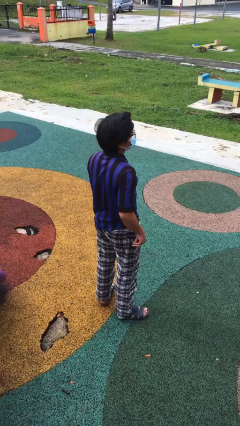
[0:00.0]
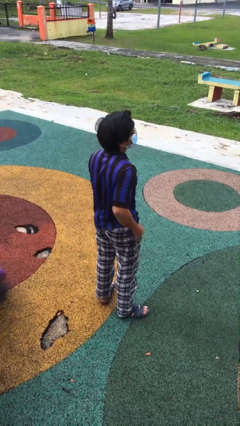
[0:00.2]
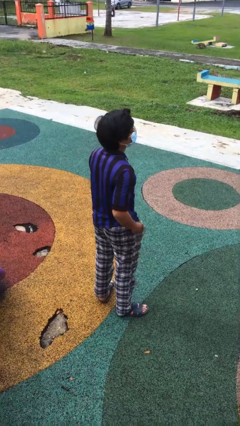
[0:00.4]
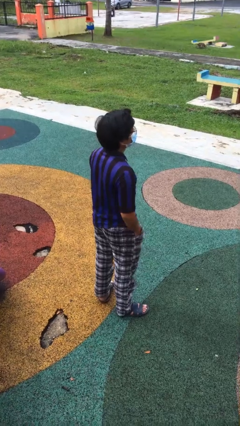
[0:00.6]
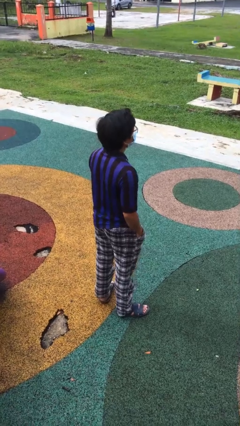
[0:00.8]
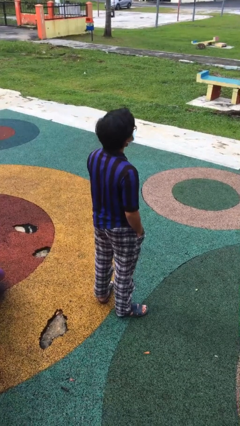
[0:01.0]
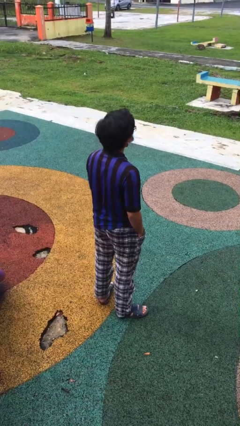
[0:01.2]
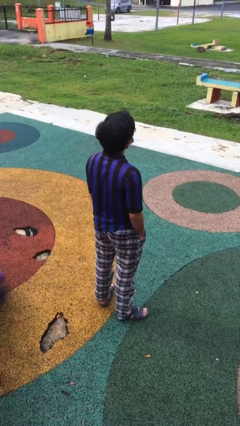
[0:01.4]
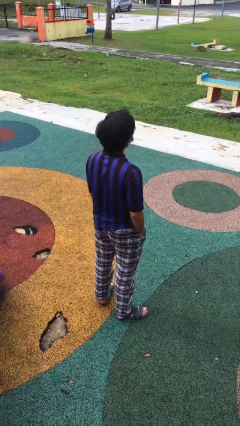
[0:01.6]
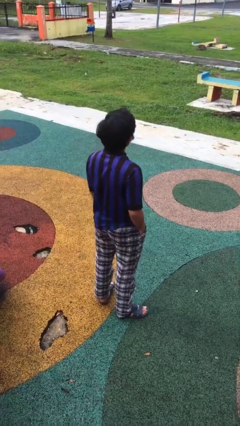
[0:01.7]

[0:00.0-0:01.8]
person puts hands in back pockets

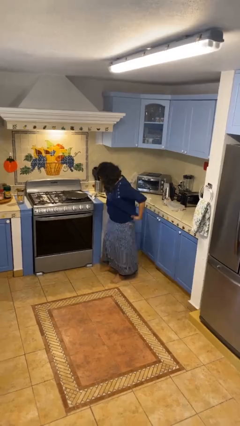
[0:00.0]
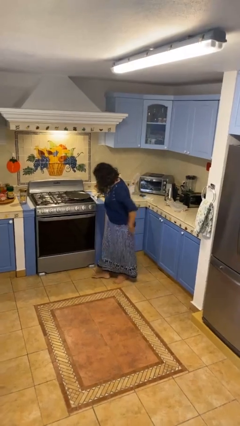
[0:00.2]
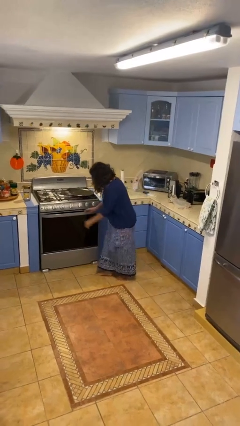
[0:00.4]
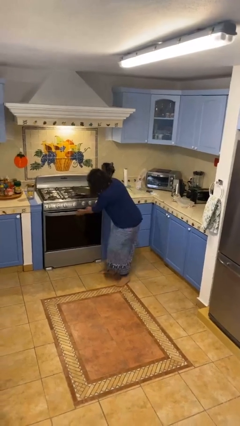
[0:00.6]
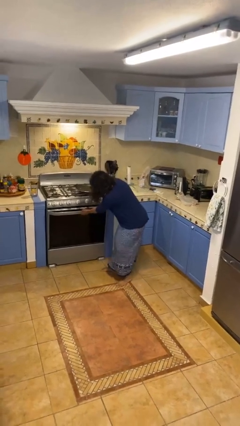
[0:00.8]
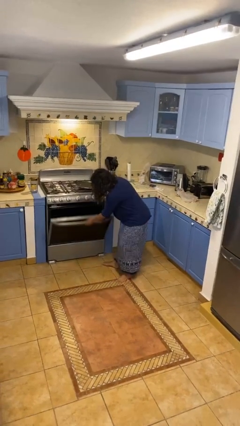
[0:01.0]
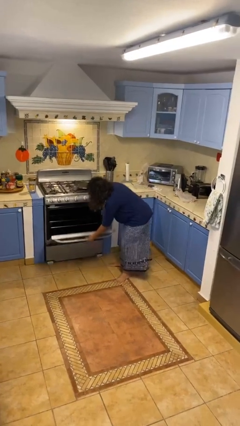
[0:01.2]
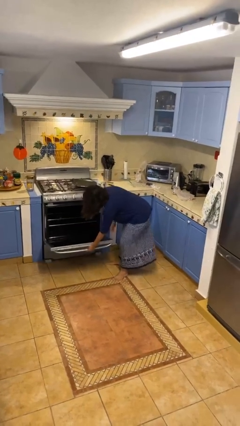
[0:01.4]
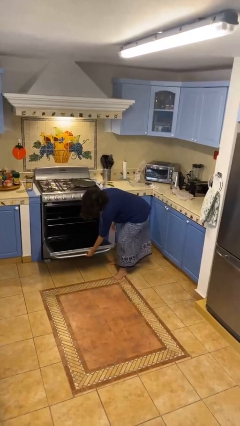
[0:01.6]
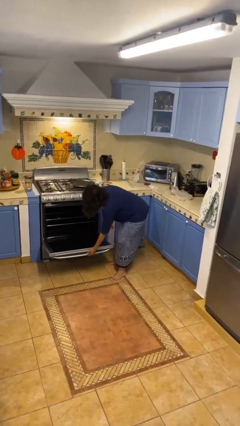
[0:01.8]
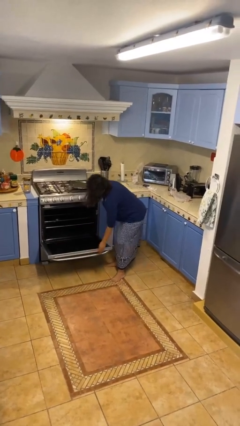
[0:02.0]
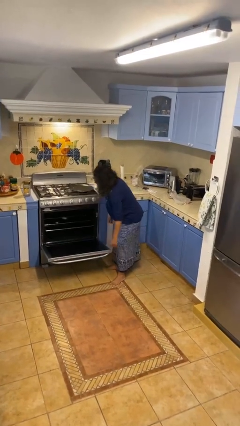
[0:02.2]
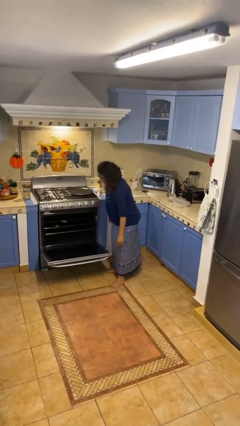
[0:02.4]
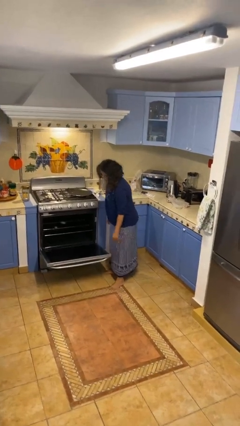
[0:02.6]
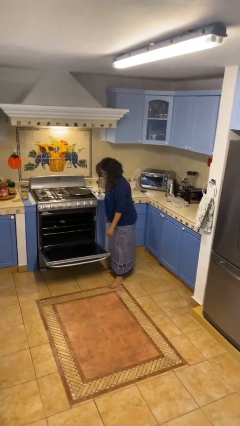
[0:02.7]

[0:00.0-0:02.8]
person opens oven door

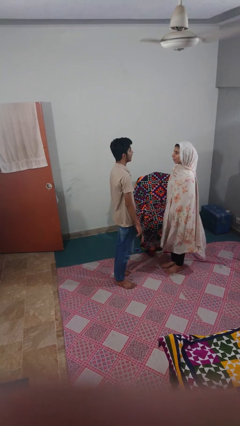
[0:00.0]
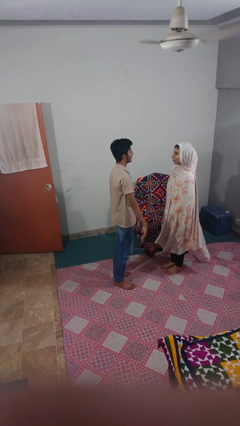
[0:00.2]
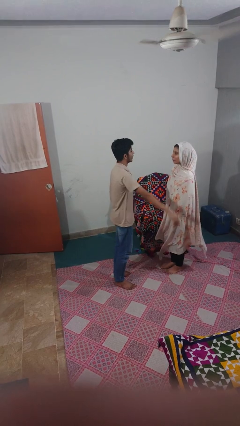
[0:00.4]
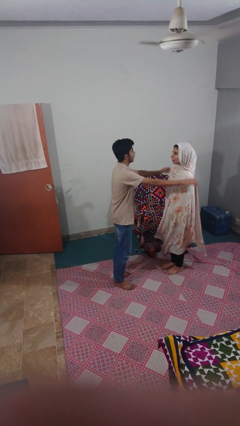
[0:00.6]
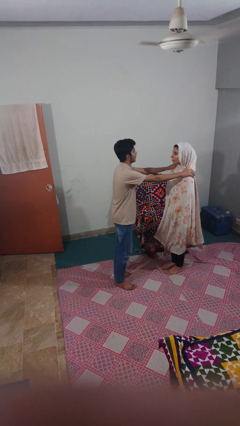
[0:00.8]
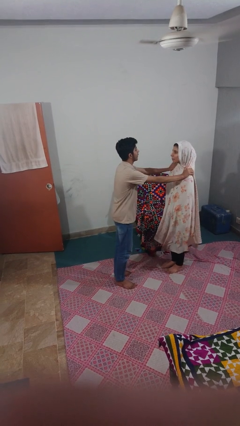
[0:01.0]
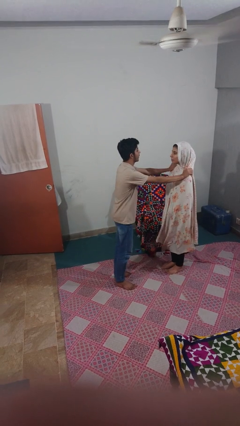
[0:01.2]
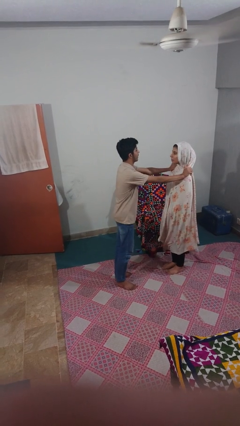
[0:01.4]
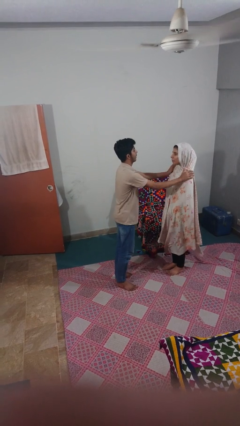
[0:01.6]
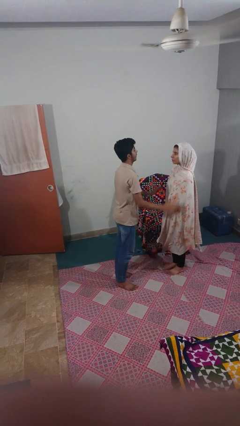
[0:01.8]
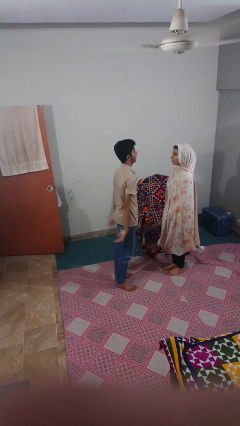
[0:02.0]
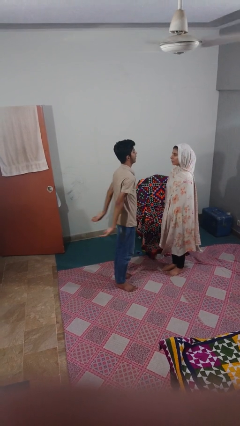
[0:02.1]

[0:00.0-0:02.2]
person pounds shoulders of person

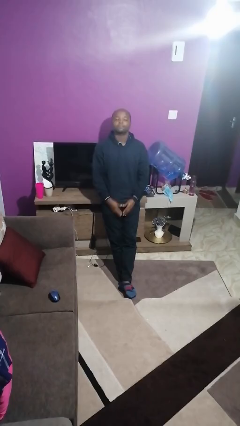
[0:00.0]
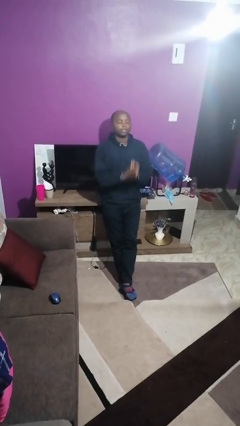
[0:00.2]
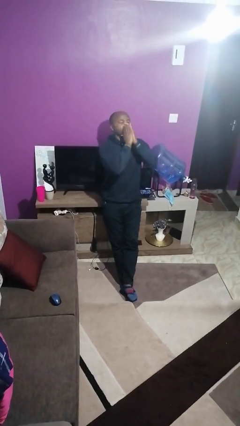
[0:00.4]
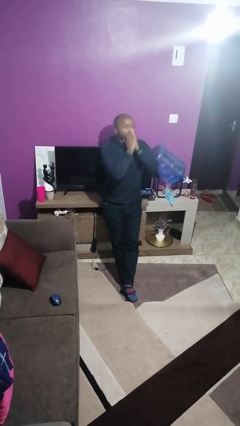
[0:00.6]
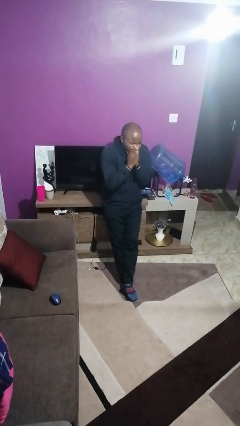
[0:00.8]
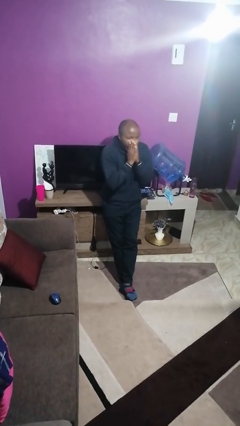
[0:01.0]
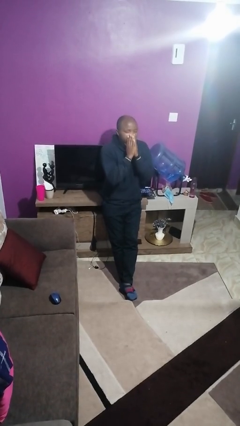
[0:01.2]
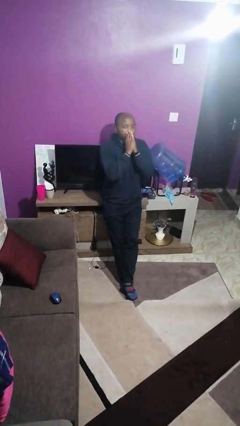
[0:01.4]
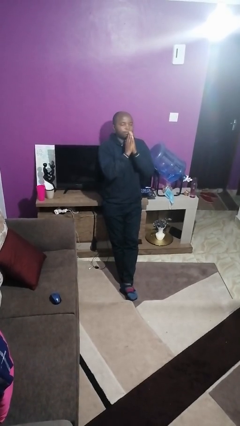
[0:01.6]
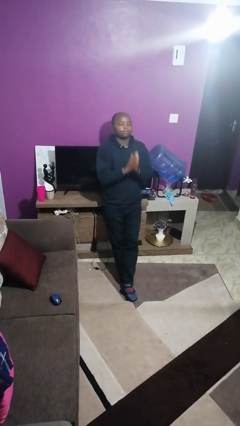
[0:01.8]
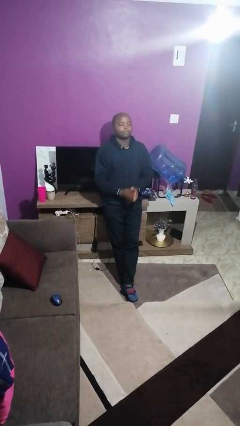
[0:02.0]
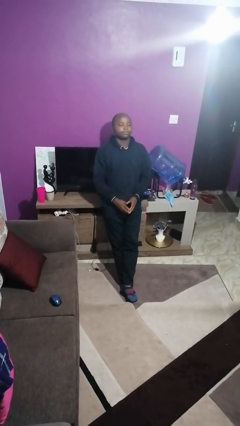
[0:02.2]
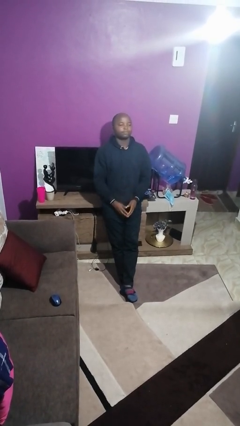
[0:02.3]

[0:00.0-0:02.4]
person sneezes into hand

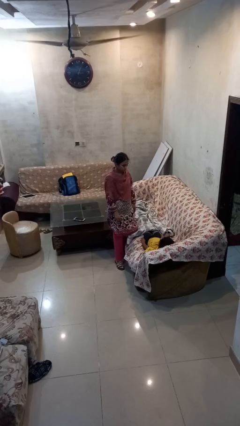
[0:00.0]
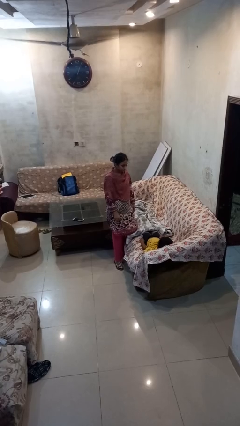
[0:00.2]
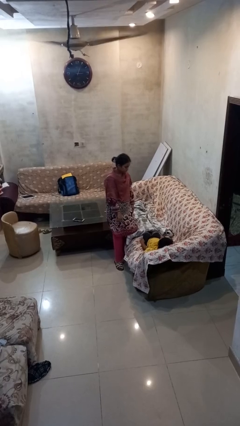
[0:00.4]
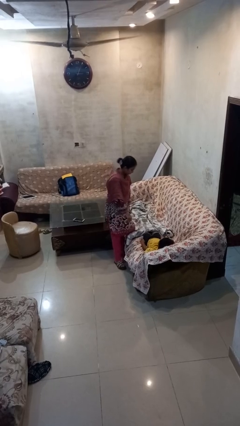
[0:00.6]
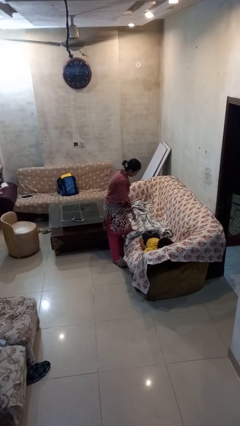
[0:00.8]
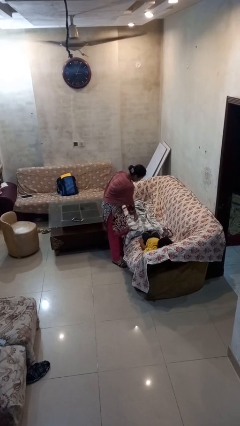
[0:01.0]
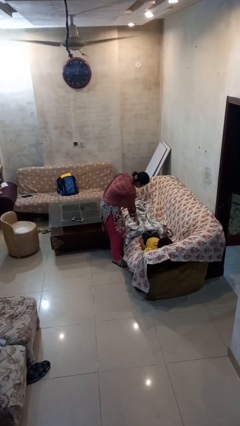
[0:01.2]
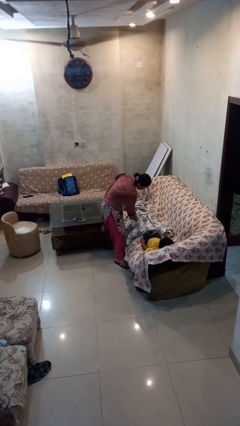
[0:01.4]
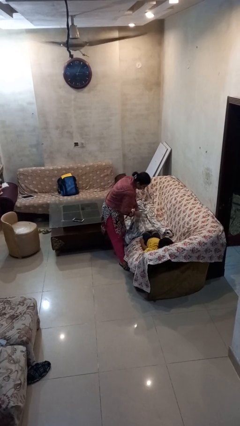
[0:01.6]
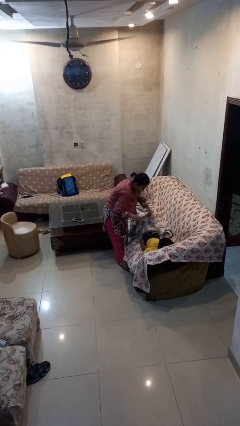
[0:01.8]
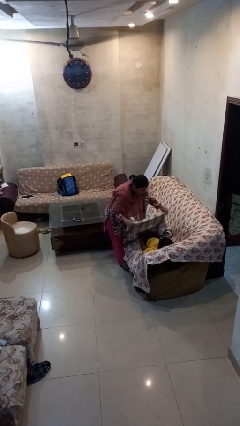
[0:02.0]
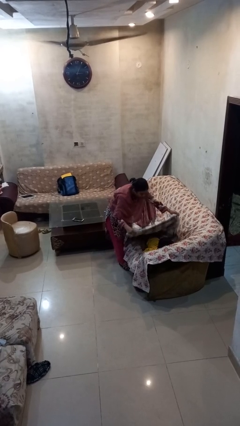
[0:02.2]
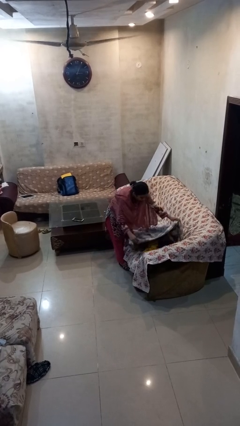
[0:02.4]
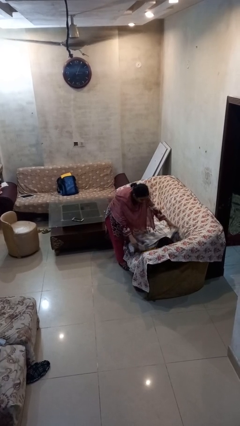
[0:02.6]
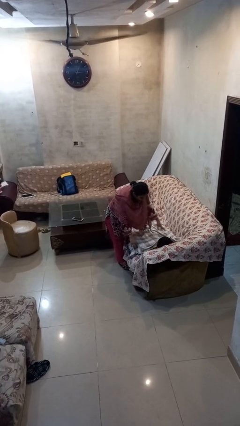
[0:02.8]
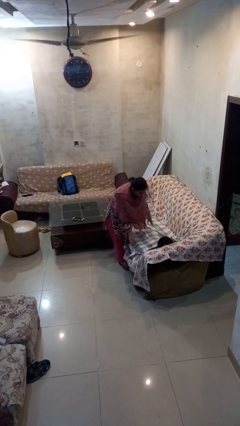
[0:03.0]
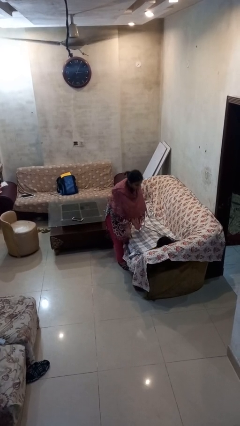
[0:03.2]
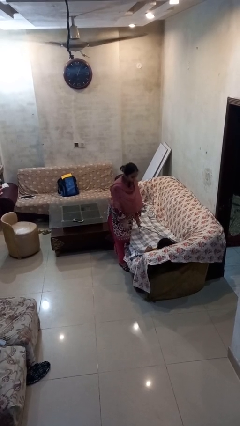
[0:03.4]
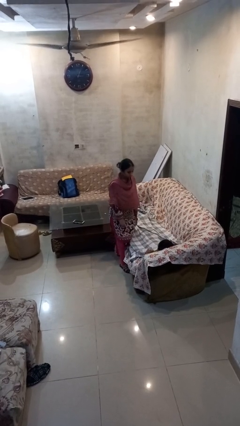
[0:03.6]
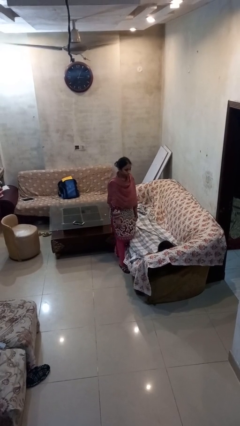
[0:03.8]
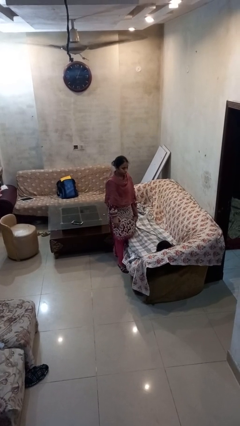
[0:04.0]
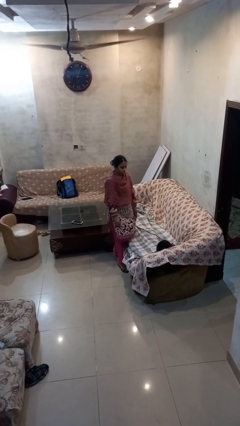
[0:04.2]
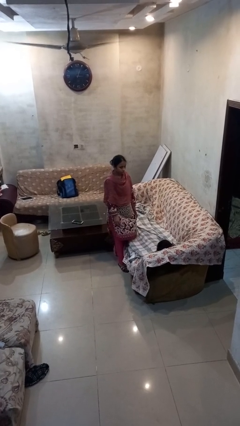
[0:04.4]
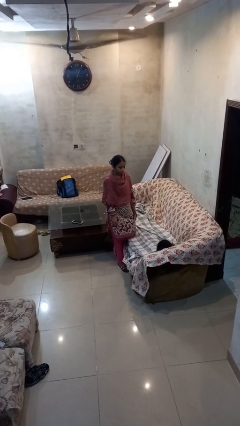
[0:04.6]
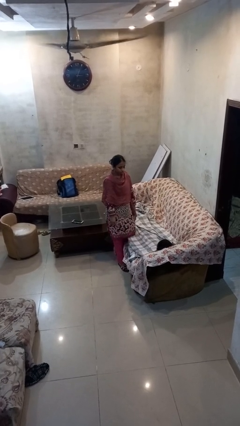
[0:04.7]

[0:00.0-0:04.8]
person covers friend with blanket

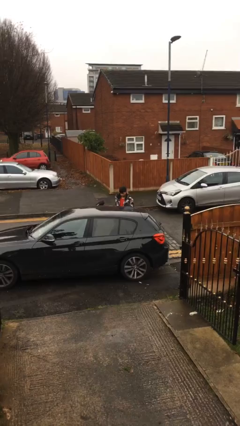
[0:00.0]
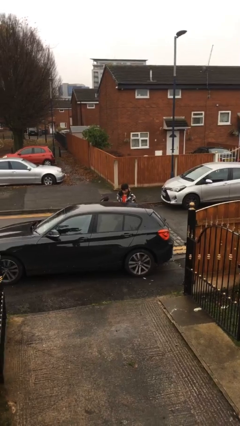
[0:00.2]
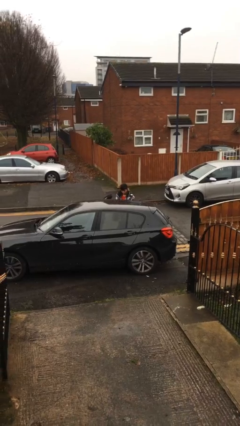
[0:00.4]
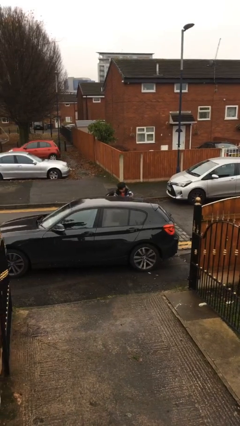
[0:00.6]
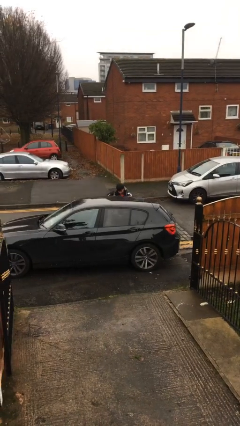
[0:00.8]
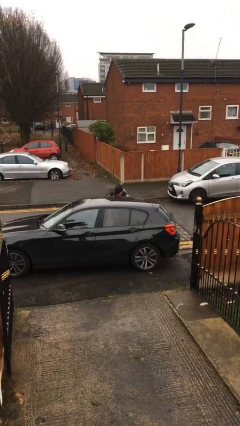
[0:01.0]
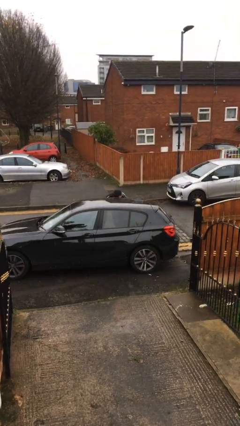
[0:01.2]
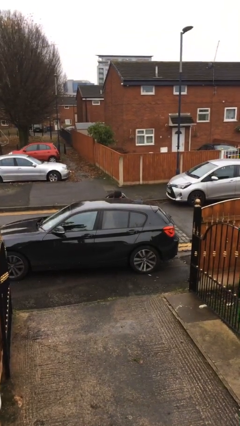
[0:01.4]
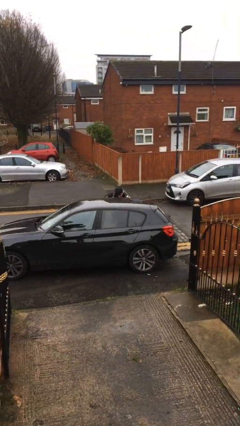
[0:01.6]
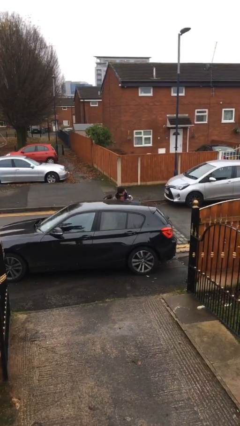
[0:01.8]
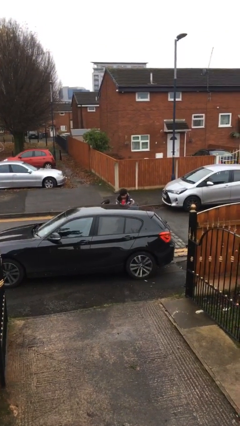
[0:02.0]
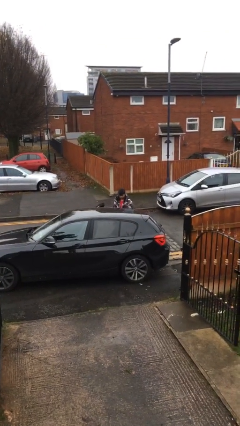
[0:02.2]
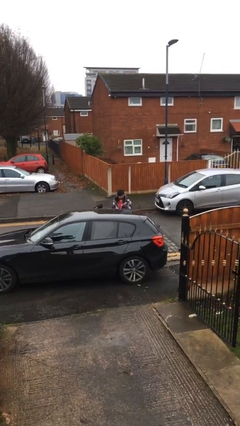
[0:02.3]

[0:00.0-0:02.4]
person loads car

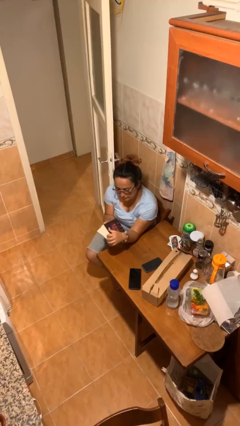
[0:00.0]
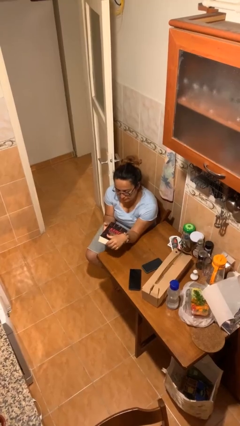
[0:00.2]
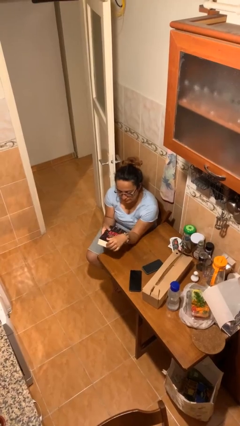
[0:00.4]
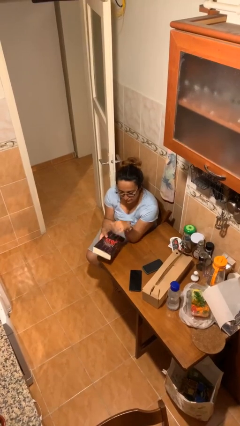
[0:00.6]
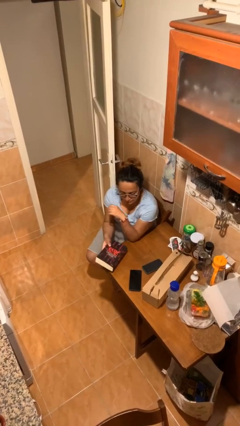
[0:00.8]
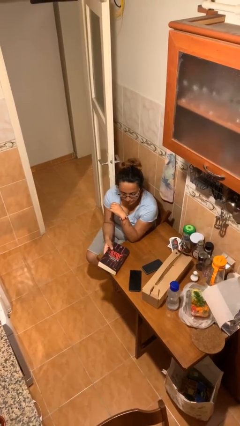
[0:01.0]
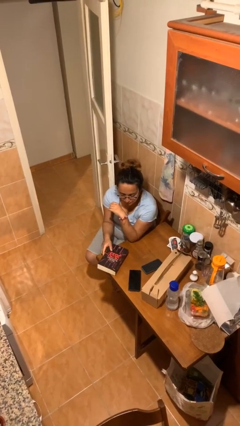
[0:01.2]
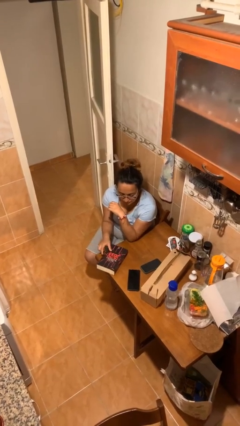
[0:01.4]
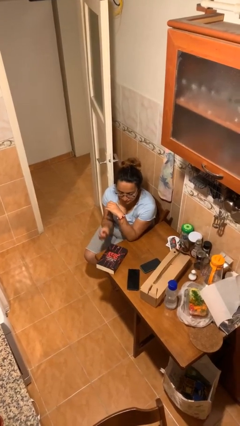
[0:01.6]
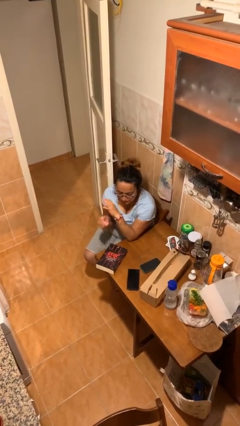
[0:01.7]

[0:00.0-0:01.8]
person puts down object on table
